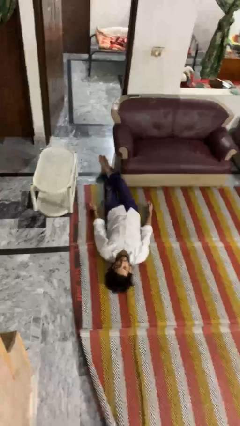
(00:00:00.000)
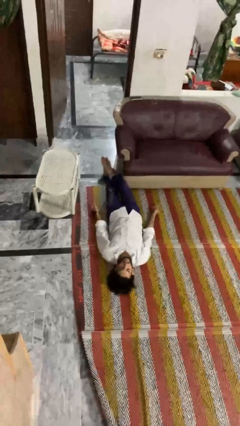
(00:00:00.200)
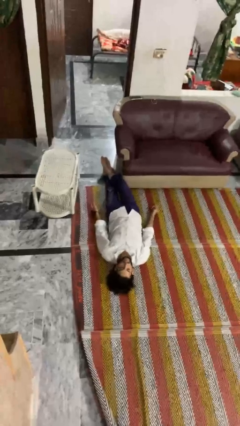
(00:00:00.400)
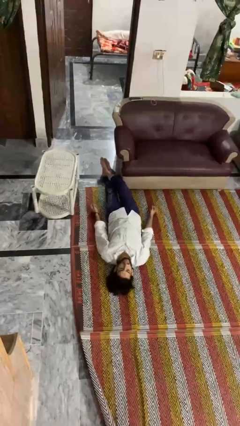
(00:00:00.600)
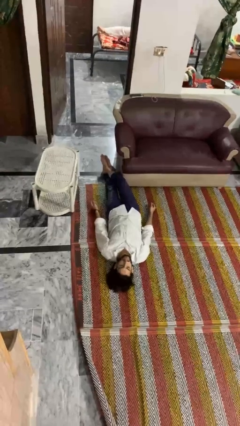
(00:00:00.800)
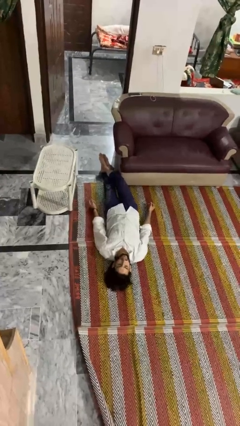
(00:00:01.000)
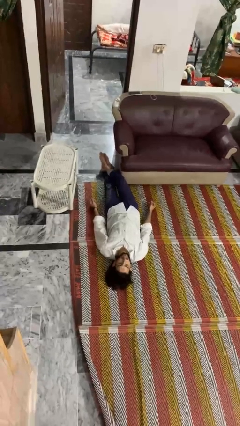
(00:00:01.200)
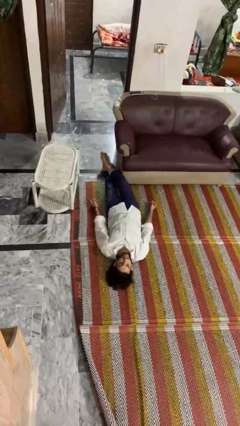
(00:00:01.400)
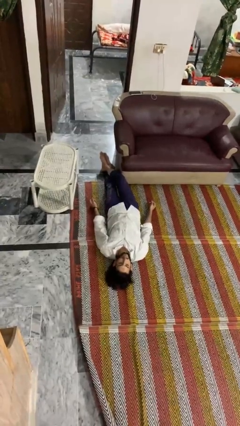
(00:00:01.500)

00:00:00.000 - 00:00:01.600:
person lies down on floor

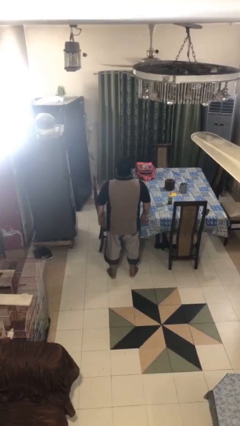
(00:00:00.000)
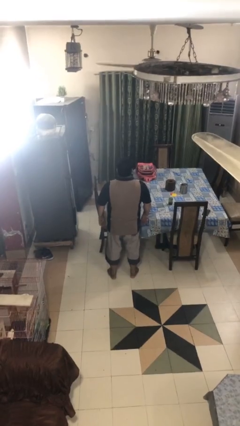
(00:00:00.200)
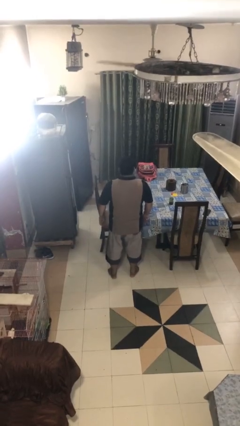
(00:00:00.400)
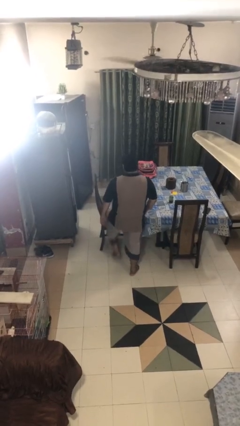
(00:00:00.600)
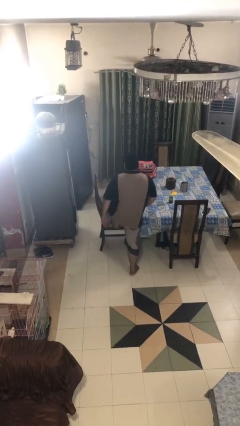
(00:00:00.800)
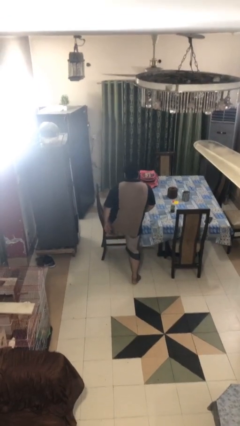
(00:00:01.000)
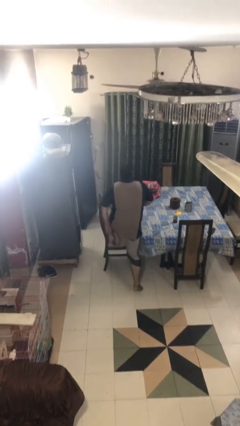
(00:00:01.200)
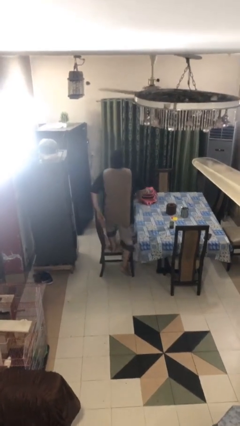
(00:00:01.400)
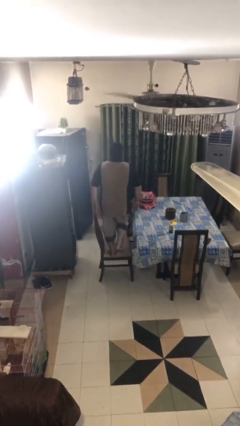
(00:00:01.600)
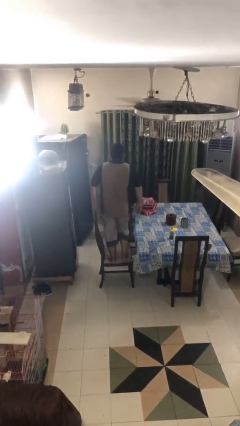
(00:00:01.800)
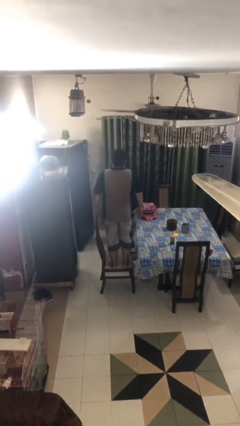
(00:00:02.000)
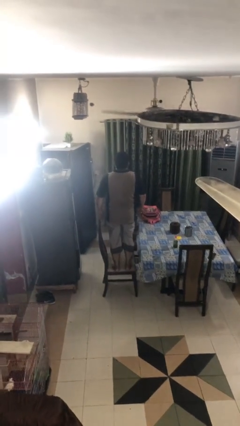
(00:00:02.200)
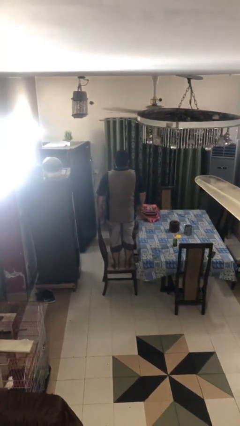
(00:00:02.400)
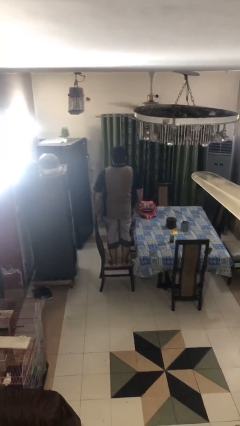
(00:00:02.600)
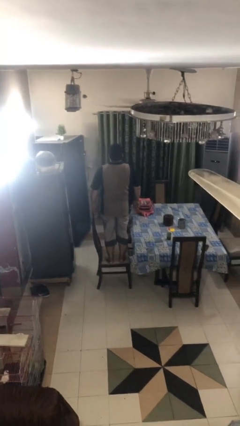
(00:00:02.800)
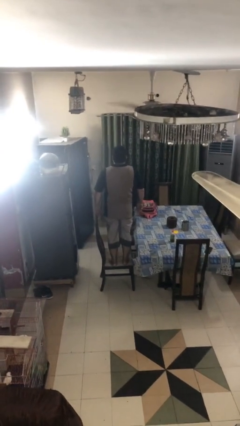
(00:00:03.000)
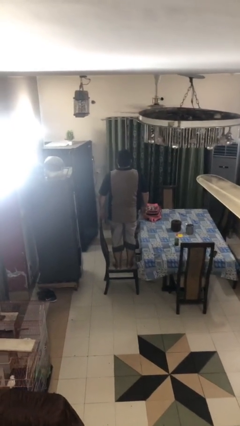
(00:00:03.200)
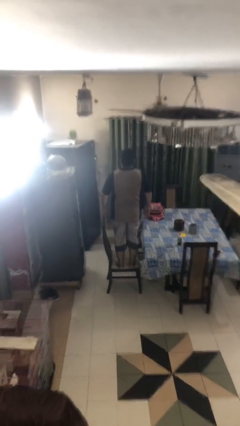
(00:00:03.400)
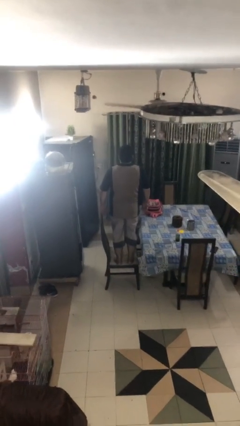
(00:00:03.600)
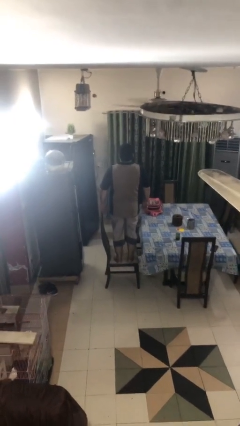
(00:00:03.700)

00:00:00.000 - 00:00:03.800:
person climbs on chair

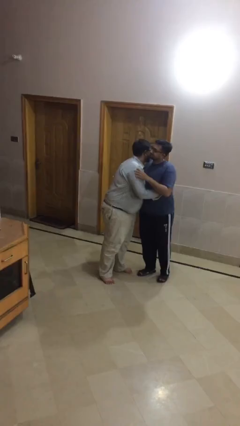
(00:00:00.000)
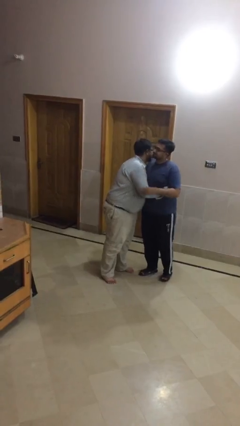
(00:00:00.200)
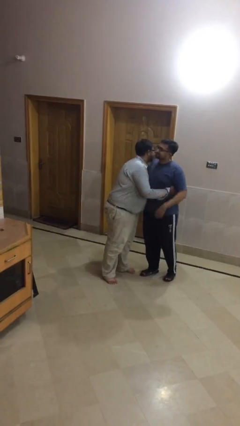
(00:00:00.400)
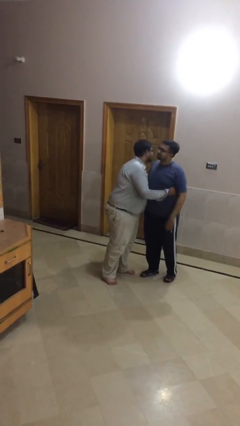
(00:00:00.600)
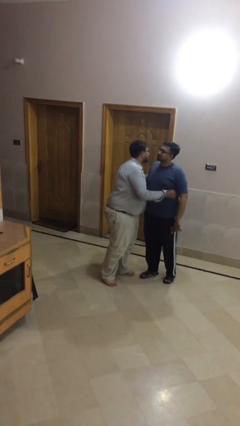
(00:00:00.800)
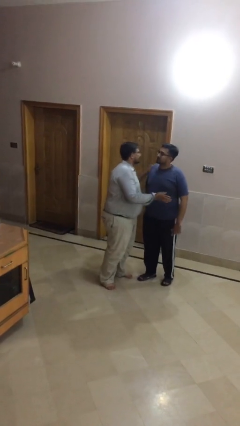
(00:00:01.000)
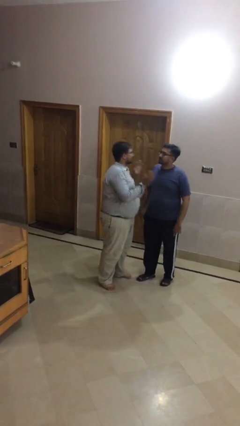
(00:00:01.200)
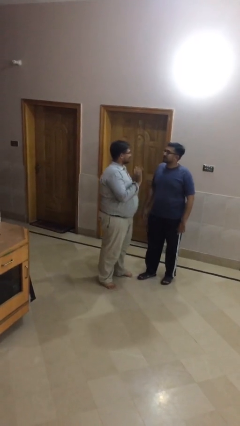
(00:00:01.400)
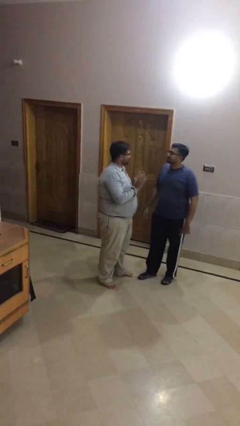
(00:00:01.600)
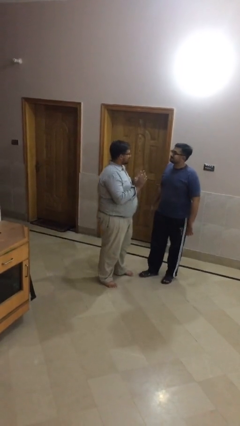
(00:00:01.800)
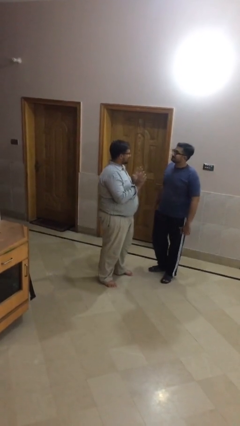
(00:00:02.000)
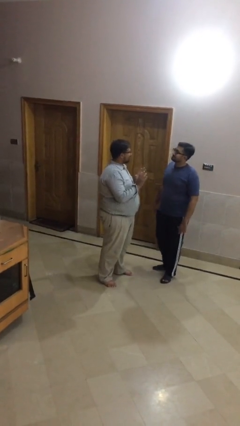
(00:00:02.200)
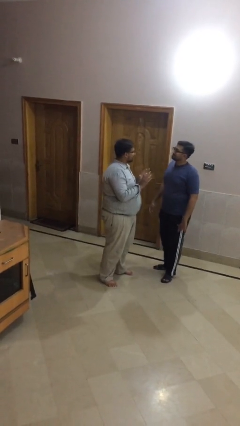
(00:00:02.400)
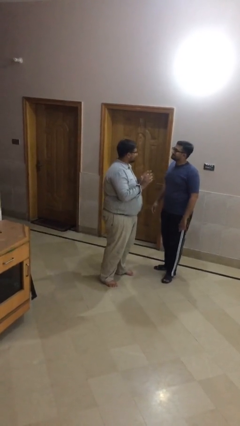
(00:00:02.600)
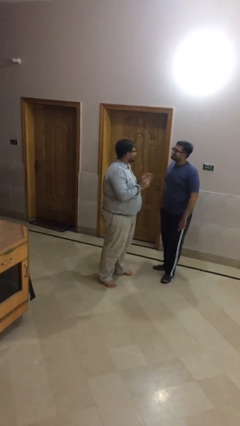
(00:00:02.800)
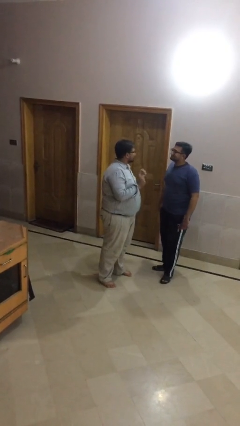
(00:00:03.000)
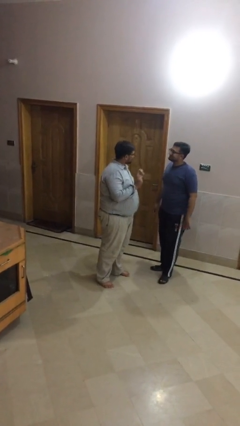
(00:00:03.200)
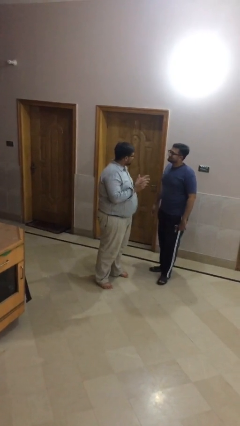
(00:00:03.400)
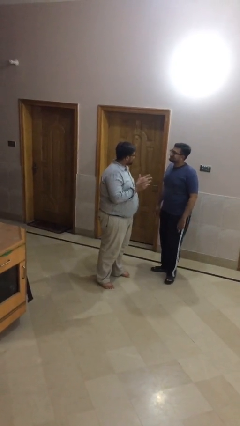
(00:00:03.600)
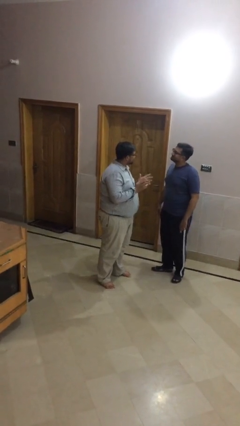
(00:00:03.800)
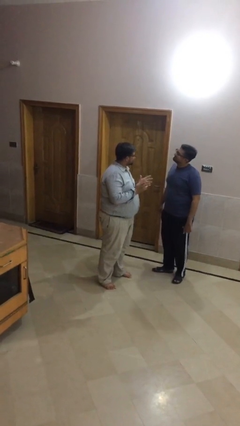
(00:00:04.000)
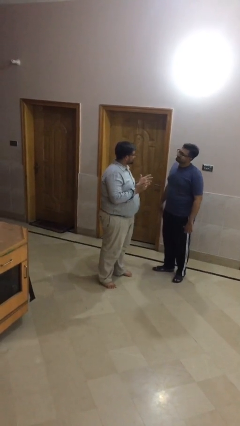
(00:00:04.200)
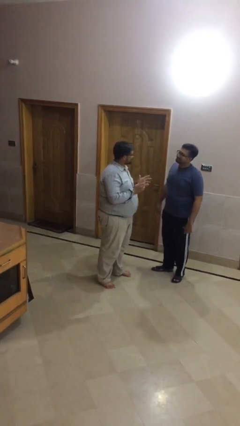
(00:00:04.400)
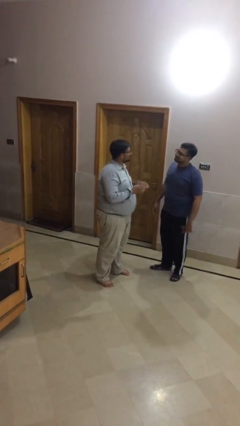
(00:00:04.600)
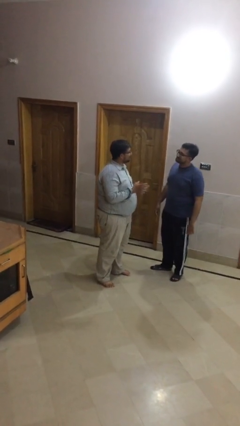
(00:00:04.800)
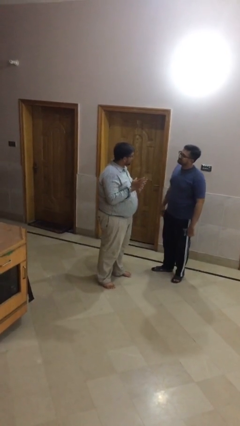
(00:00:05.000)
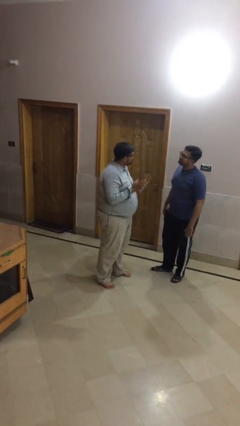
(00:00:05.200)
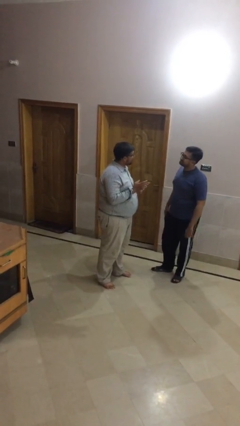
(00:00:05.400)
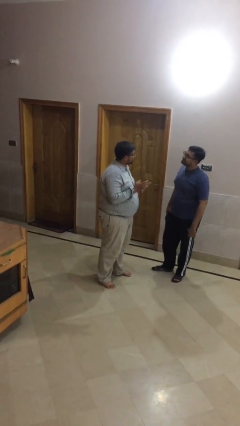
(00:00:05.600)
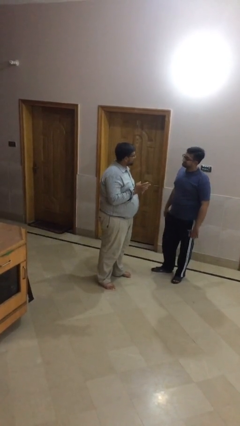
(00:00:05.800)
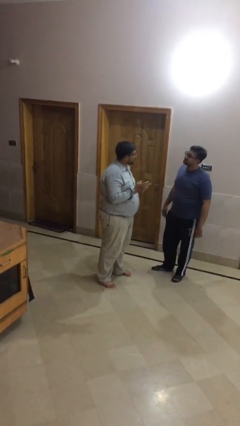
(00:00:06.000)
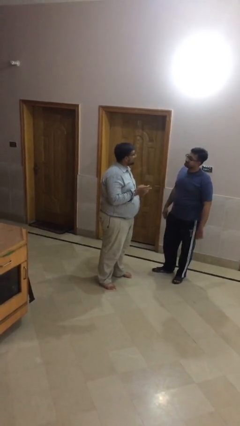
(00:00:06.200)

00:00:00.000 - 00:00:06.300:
person talks to person

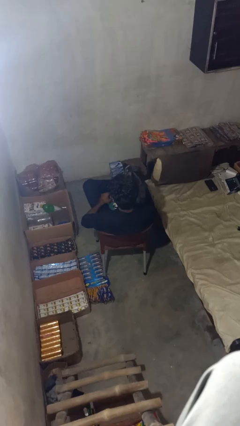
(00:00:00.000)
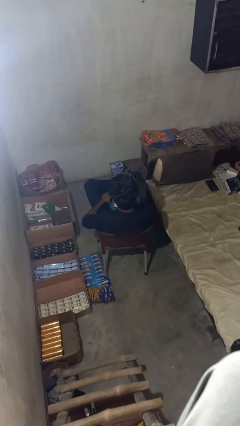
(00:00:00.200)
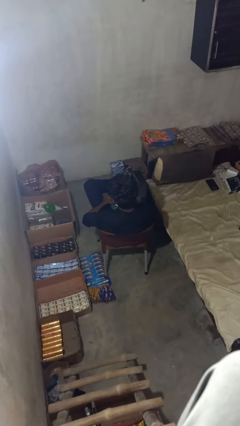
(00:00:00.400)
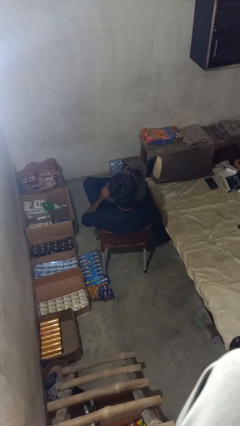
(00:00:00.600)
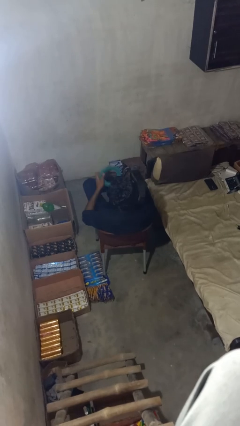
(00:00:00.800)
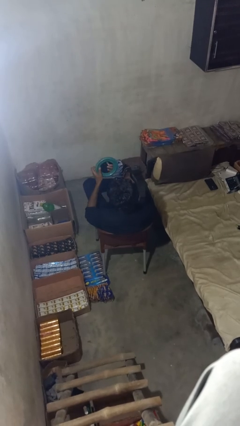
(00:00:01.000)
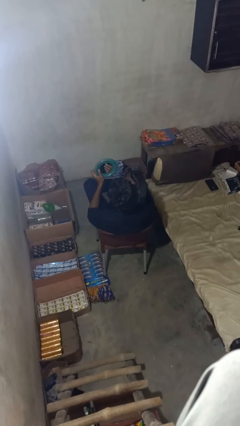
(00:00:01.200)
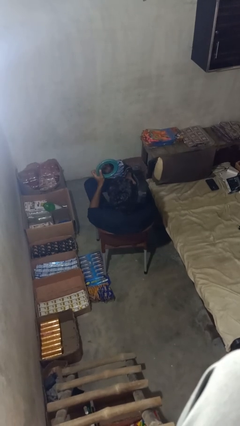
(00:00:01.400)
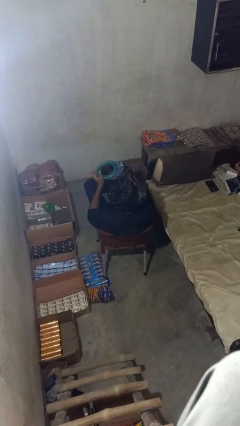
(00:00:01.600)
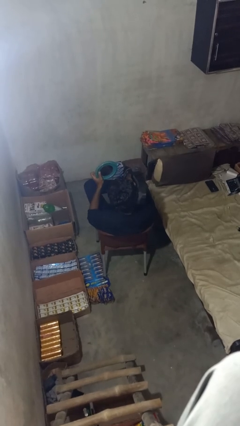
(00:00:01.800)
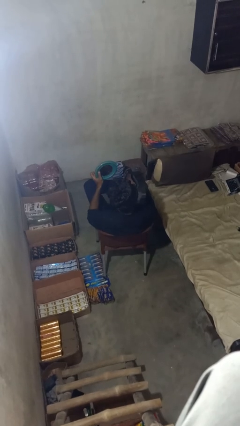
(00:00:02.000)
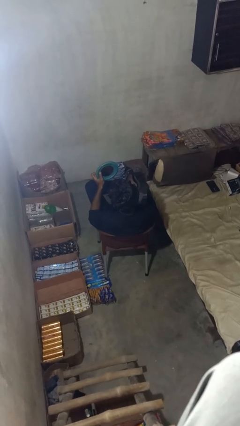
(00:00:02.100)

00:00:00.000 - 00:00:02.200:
person applies lip makeup

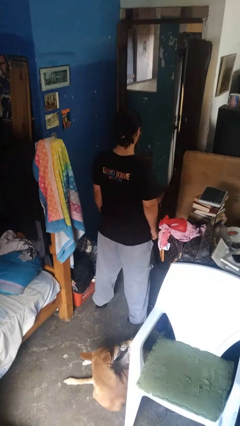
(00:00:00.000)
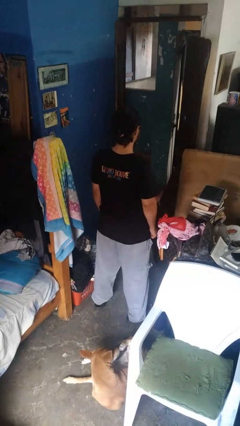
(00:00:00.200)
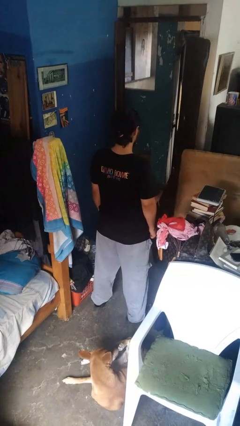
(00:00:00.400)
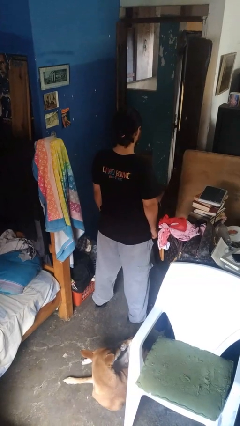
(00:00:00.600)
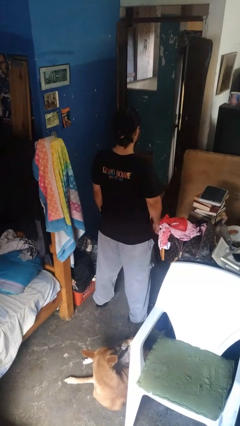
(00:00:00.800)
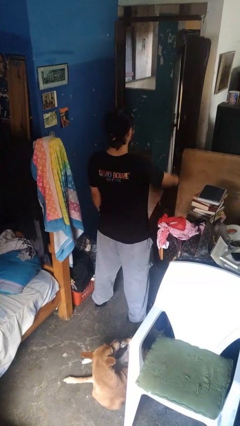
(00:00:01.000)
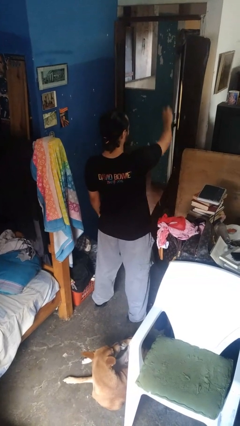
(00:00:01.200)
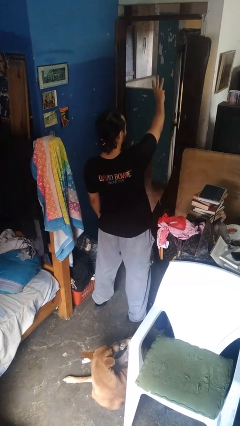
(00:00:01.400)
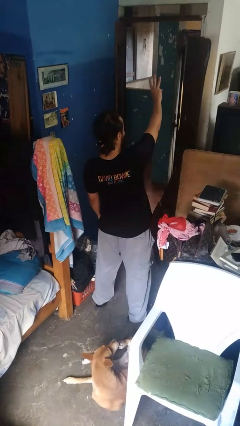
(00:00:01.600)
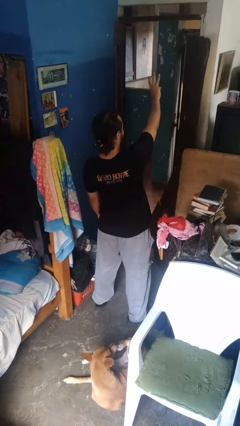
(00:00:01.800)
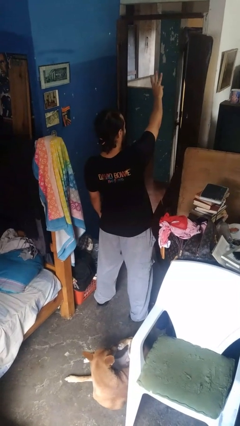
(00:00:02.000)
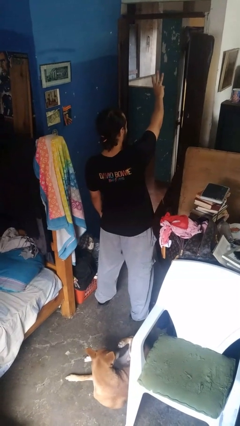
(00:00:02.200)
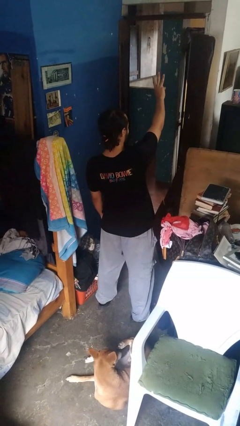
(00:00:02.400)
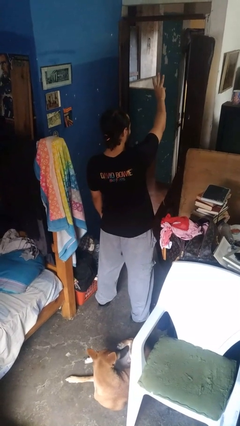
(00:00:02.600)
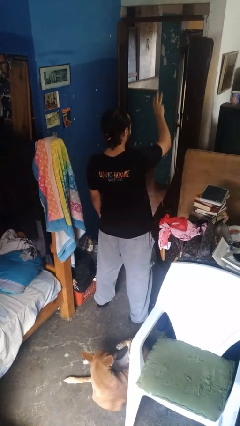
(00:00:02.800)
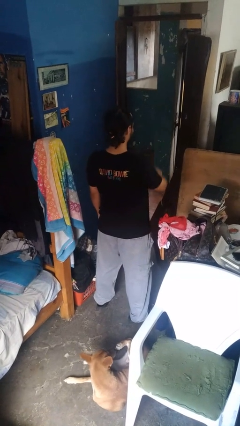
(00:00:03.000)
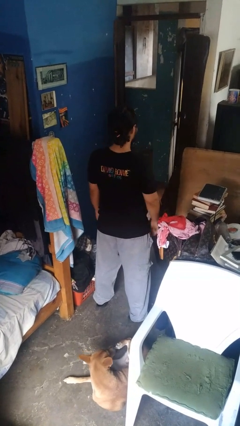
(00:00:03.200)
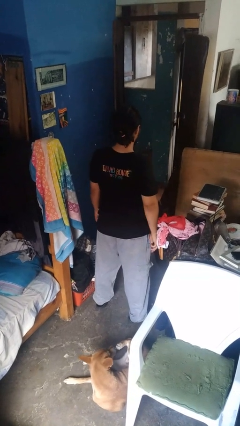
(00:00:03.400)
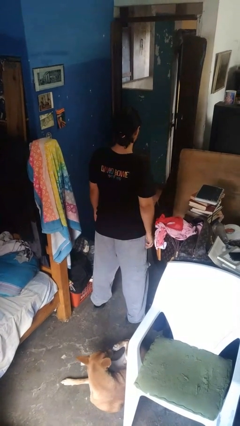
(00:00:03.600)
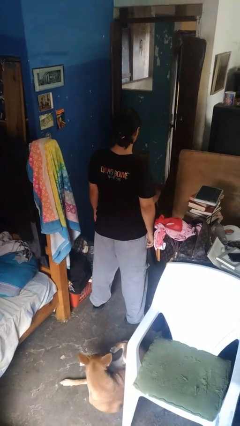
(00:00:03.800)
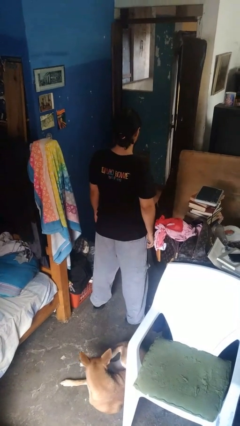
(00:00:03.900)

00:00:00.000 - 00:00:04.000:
person gestures number three
